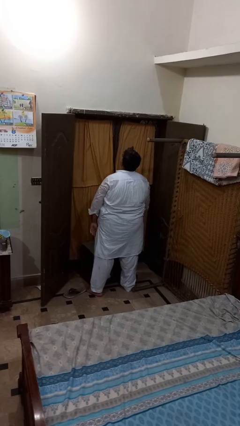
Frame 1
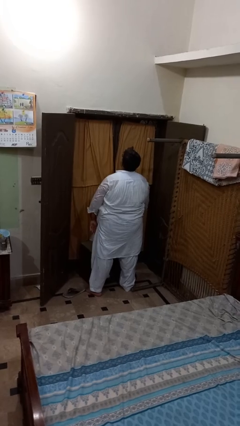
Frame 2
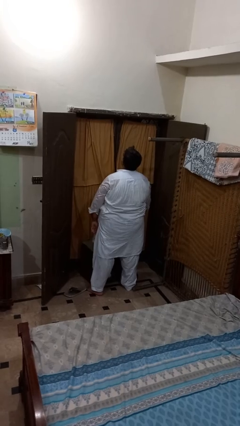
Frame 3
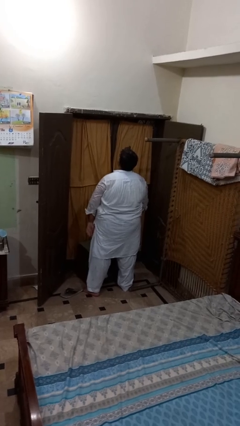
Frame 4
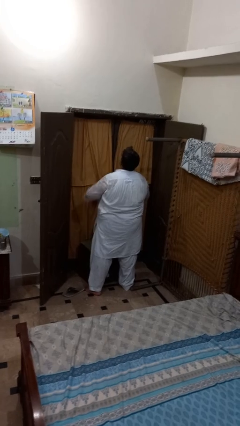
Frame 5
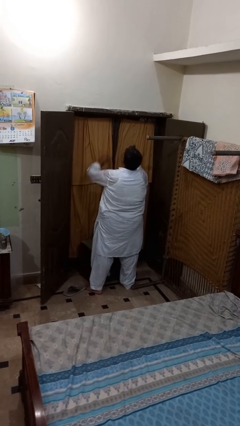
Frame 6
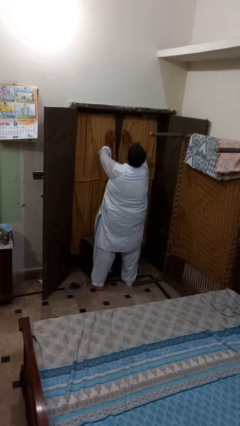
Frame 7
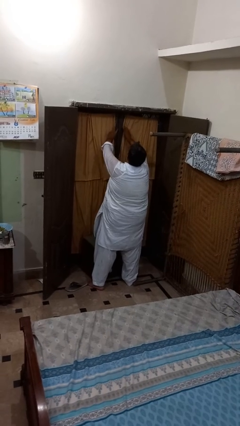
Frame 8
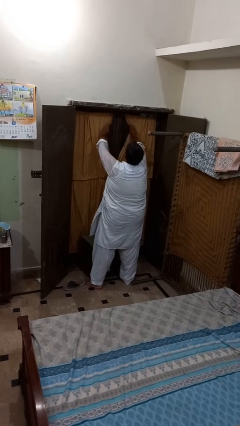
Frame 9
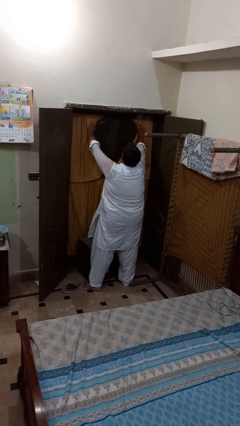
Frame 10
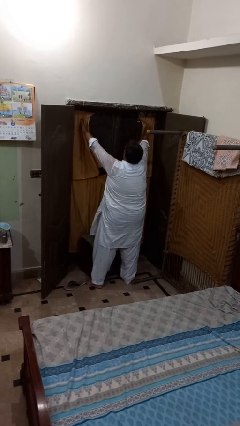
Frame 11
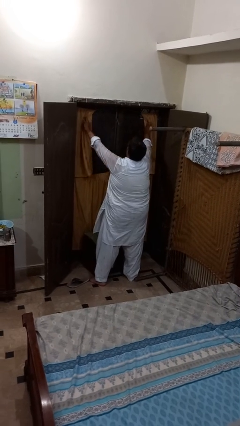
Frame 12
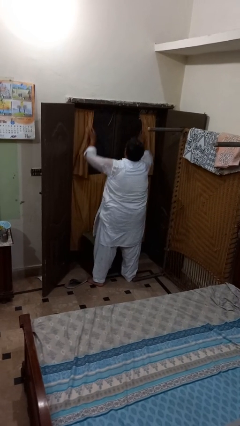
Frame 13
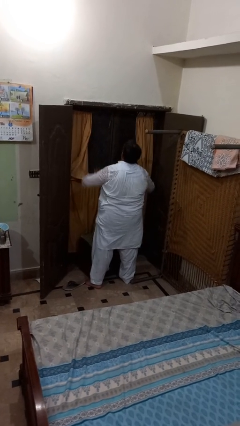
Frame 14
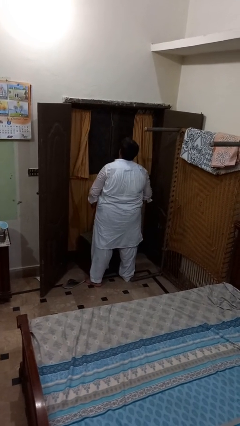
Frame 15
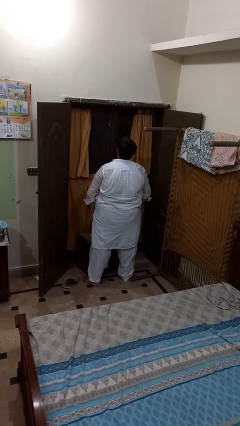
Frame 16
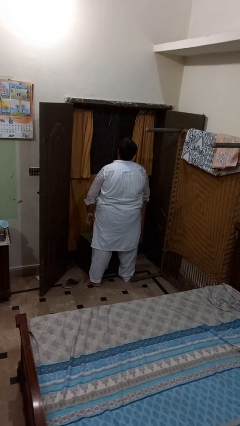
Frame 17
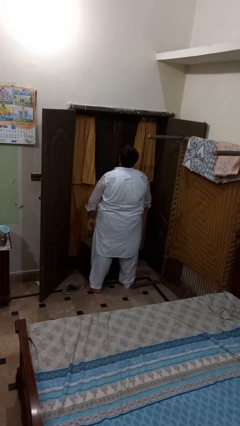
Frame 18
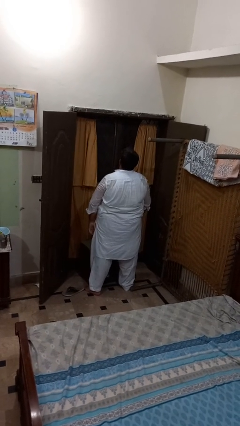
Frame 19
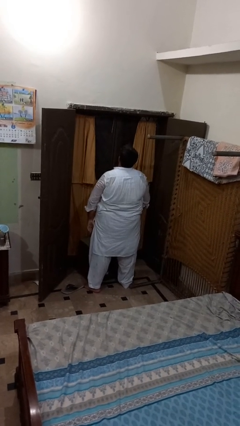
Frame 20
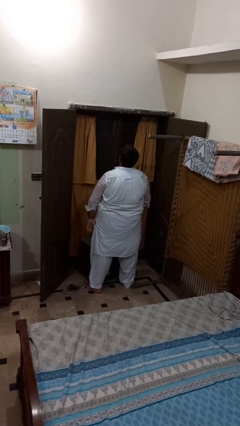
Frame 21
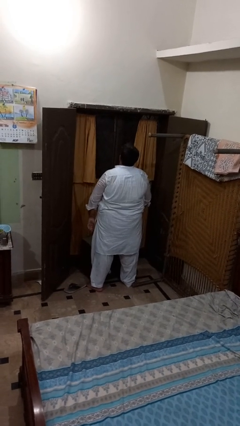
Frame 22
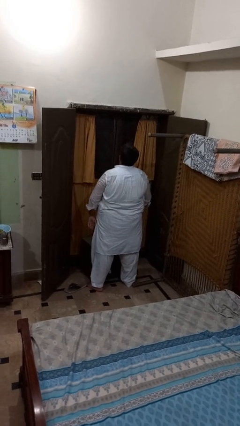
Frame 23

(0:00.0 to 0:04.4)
person opens curtains

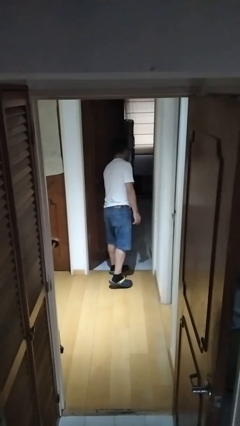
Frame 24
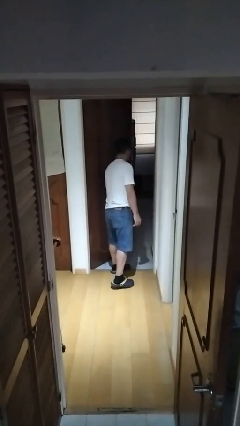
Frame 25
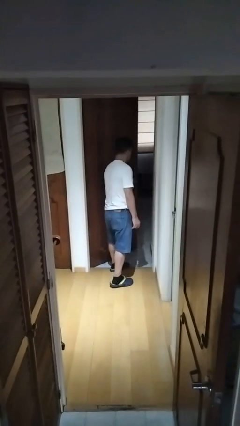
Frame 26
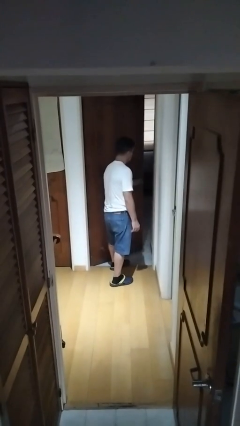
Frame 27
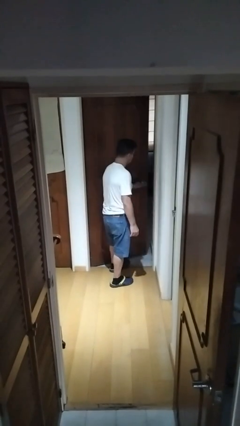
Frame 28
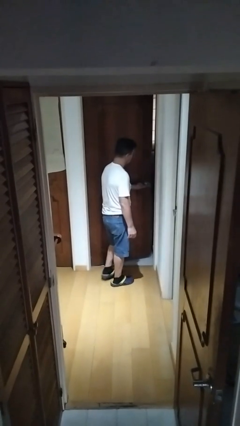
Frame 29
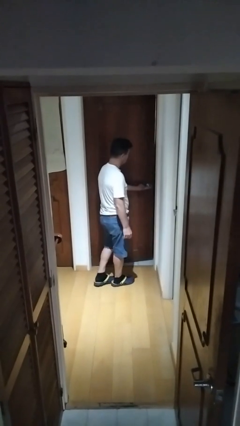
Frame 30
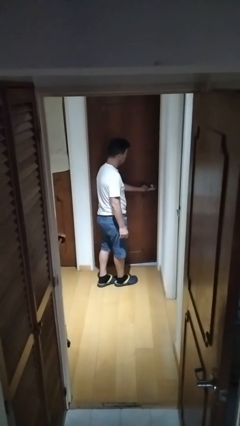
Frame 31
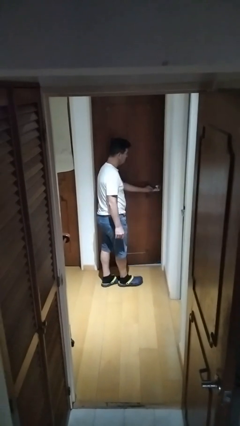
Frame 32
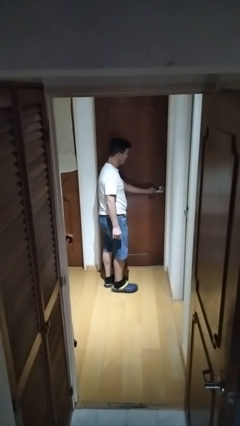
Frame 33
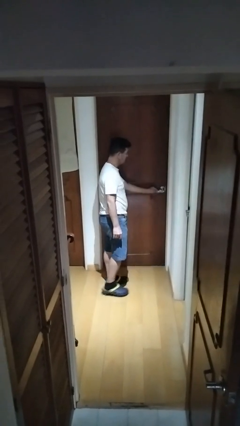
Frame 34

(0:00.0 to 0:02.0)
person closes facility door

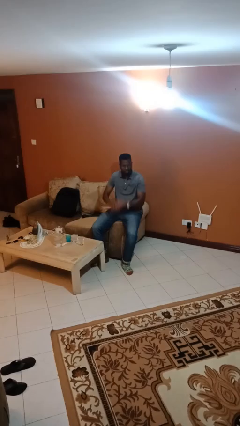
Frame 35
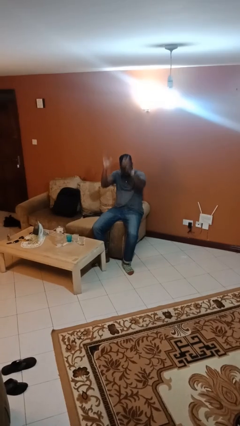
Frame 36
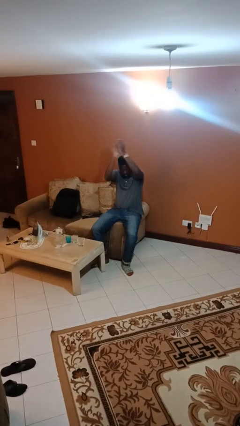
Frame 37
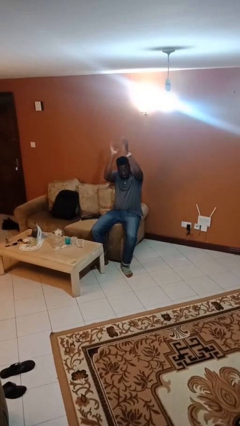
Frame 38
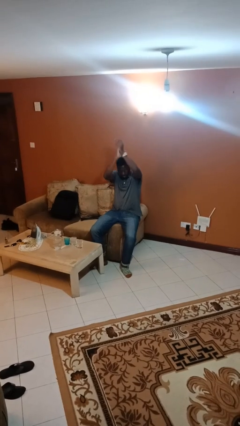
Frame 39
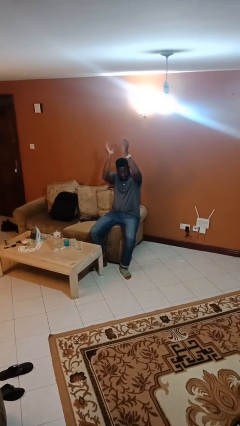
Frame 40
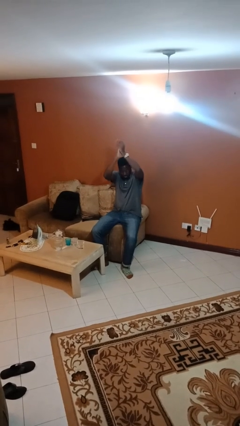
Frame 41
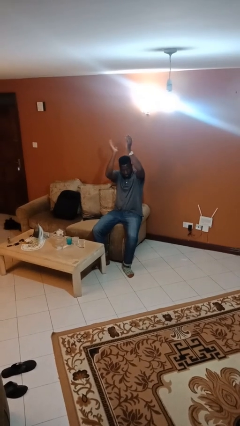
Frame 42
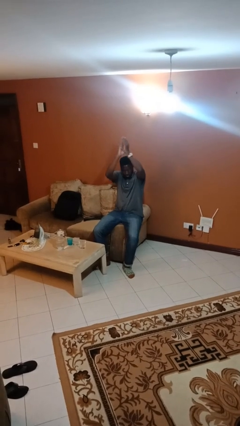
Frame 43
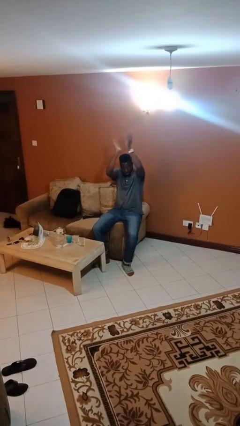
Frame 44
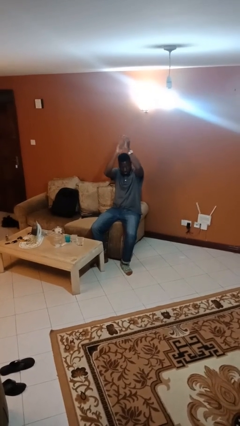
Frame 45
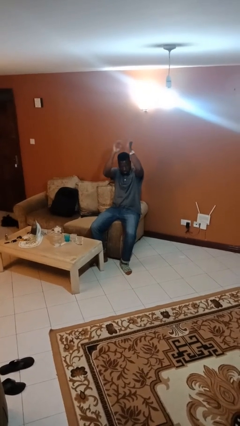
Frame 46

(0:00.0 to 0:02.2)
person claps hands

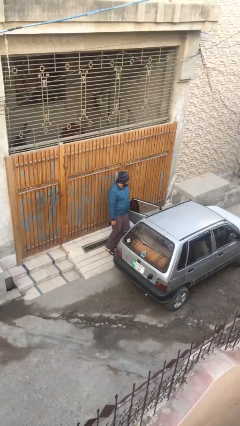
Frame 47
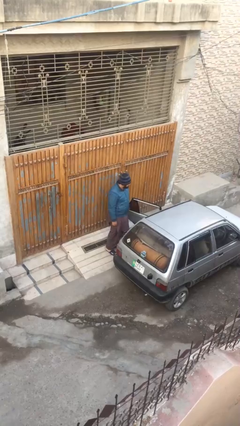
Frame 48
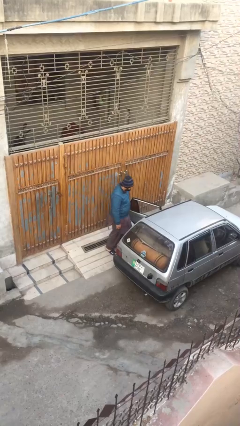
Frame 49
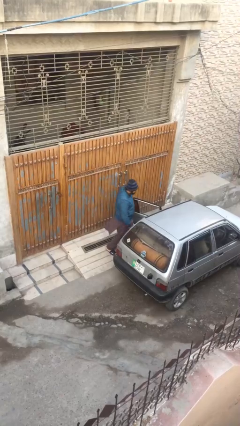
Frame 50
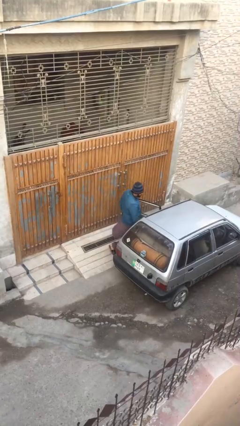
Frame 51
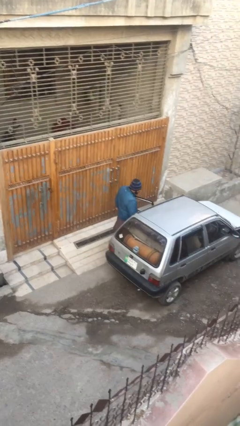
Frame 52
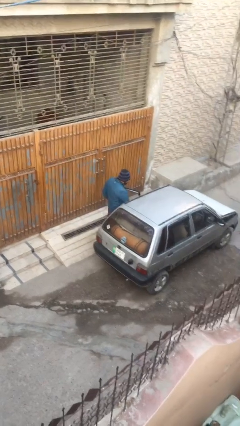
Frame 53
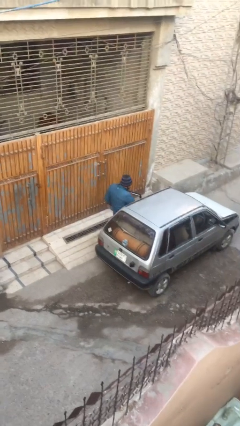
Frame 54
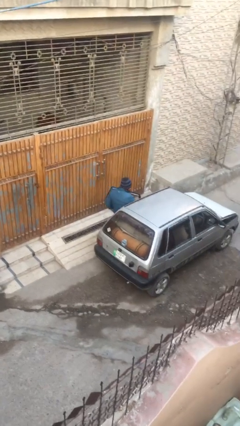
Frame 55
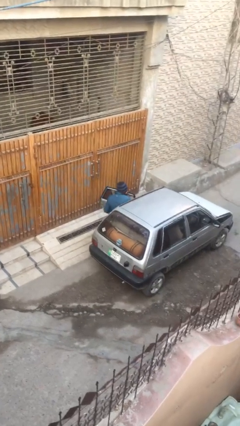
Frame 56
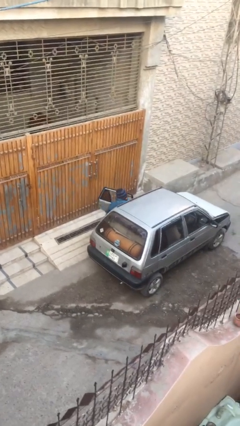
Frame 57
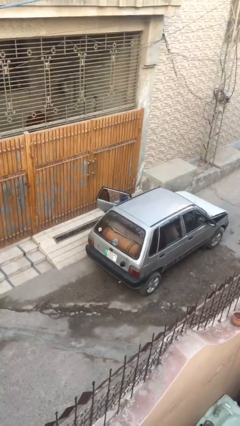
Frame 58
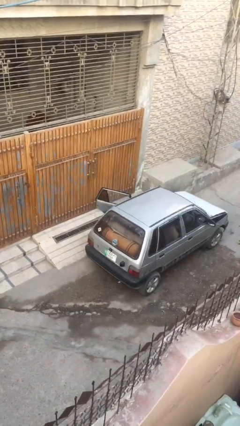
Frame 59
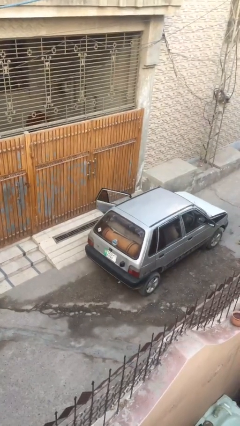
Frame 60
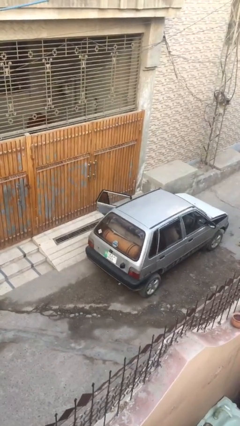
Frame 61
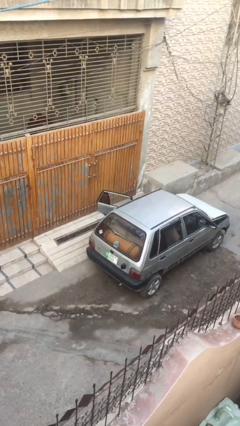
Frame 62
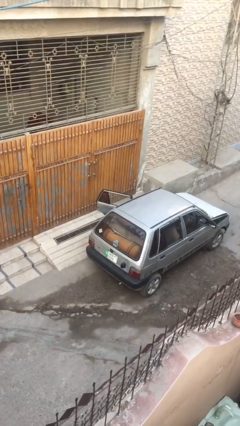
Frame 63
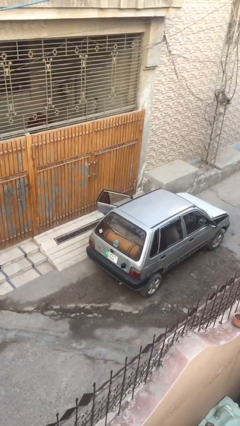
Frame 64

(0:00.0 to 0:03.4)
person enters car

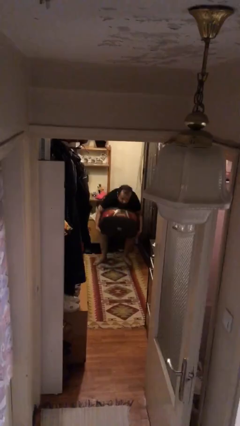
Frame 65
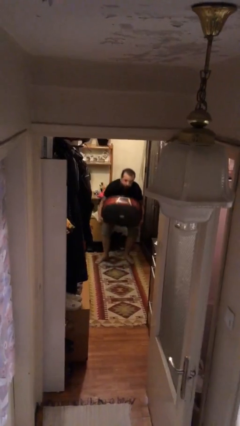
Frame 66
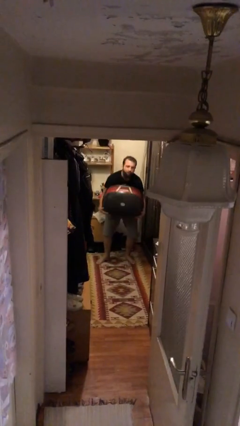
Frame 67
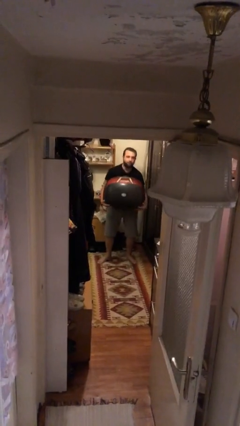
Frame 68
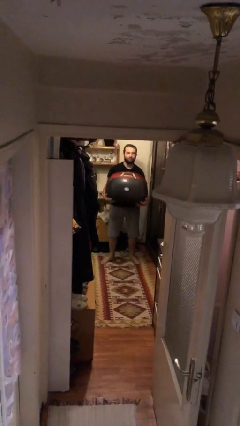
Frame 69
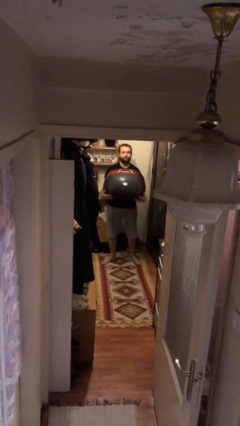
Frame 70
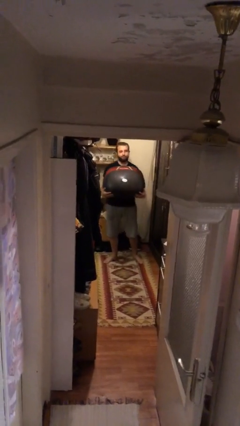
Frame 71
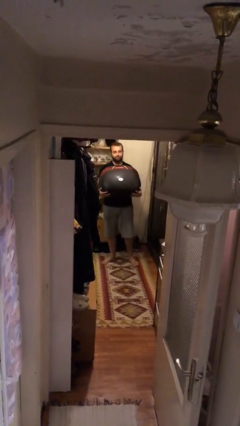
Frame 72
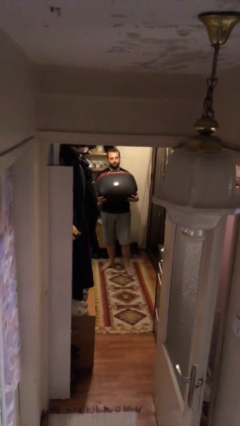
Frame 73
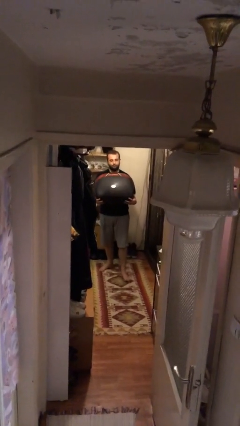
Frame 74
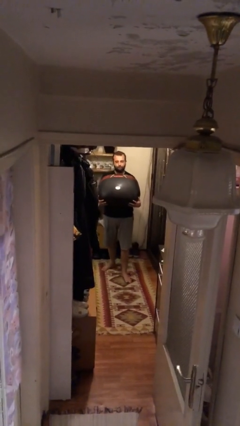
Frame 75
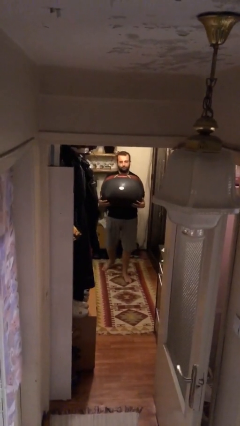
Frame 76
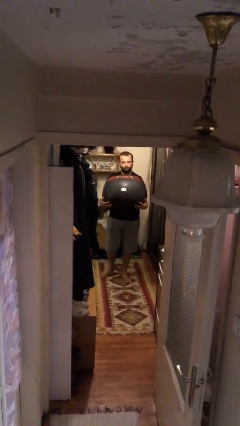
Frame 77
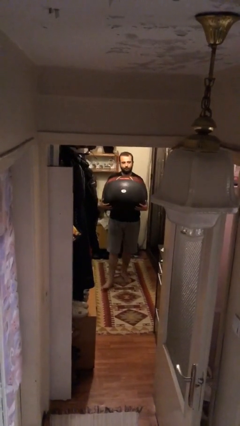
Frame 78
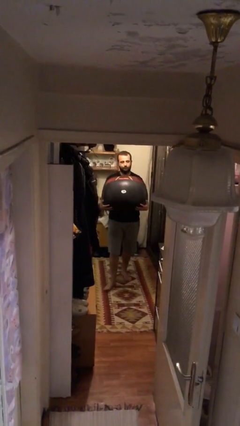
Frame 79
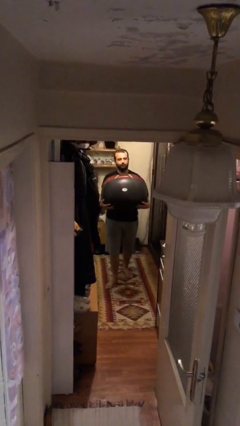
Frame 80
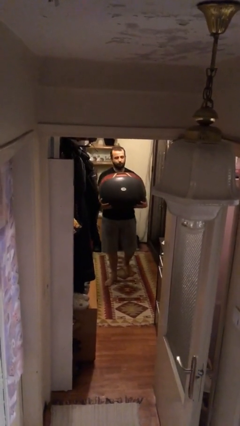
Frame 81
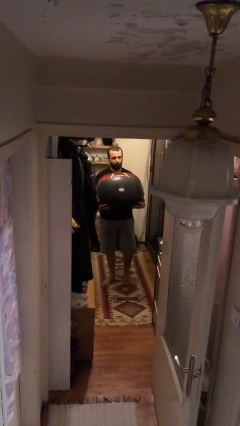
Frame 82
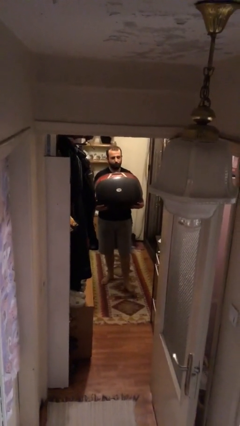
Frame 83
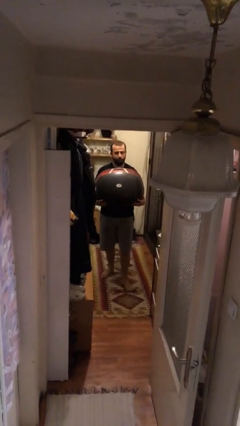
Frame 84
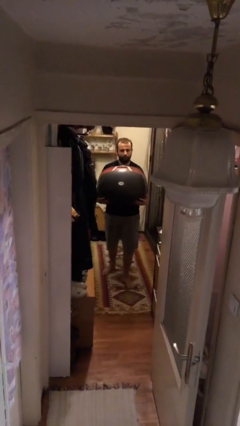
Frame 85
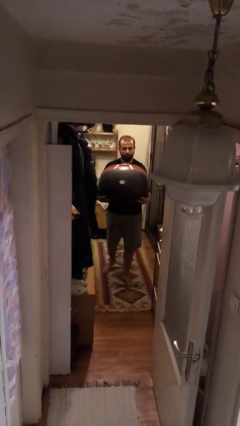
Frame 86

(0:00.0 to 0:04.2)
person carries heavy object

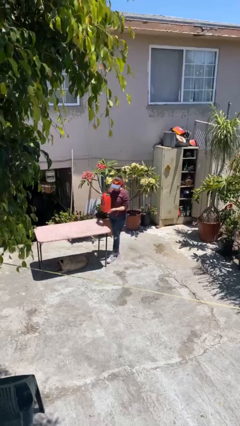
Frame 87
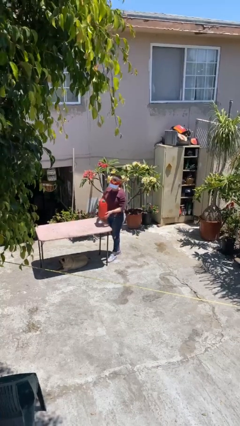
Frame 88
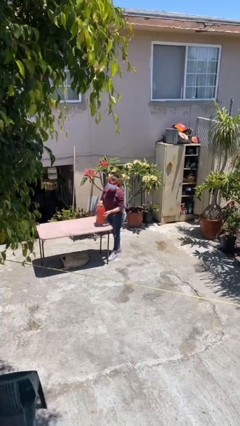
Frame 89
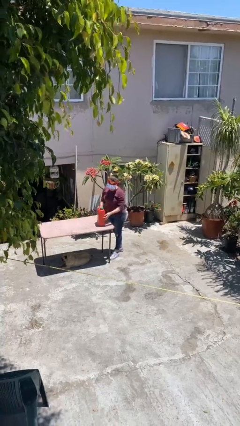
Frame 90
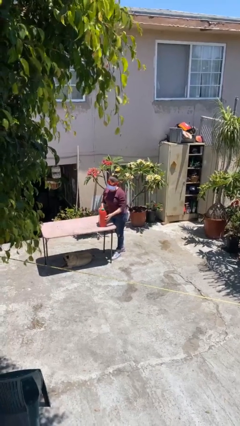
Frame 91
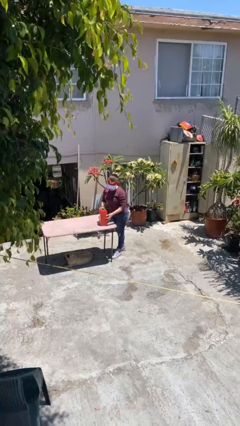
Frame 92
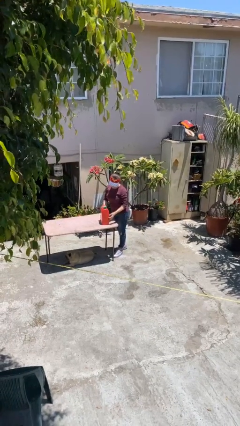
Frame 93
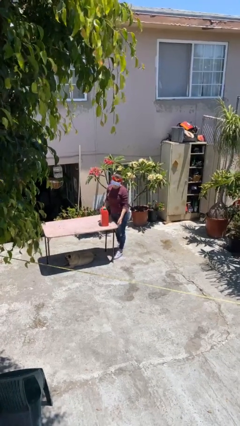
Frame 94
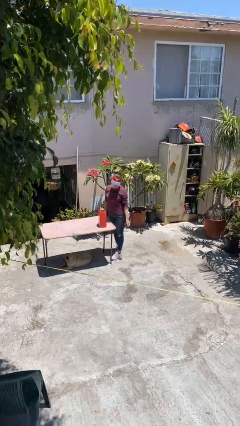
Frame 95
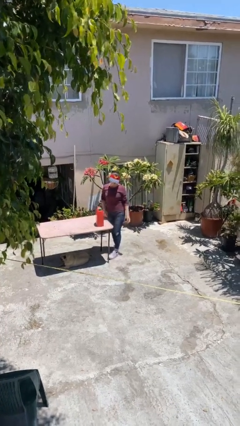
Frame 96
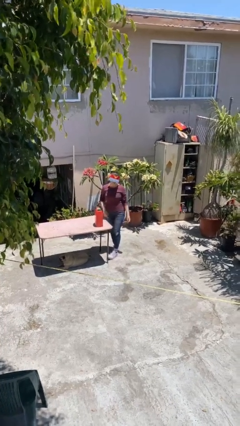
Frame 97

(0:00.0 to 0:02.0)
person puts down object on table
